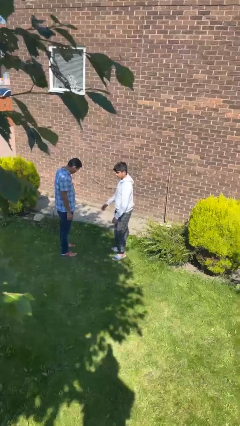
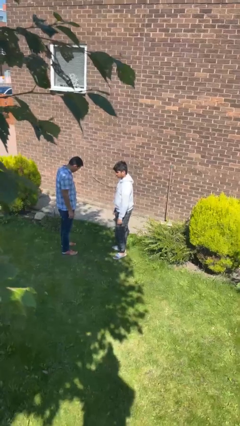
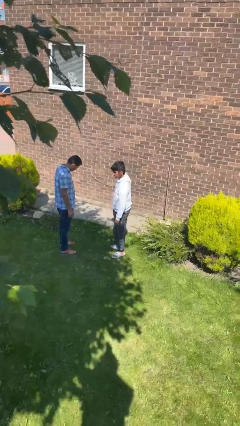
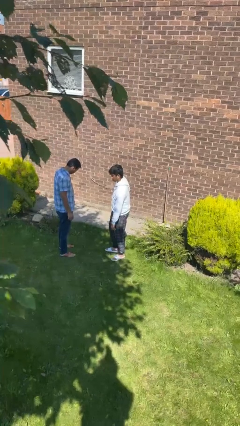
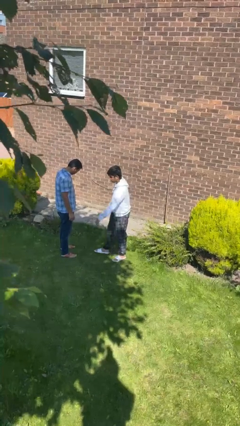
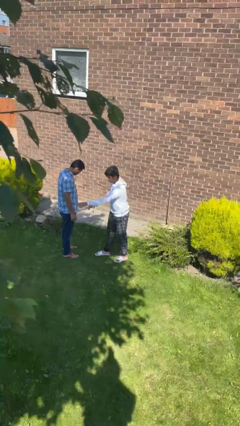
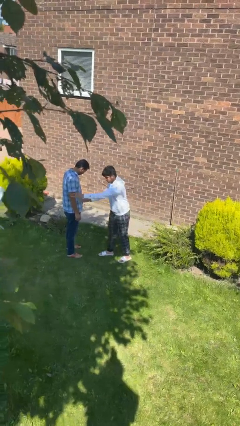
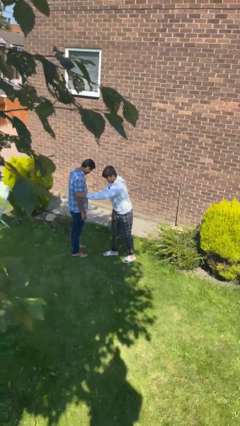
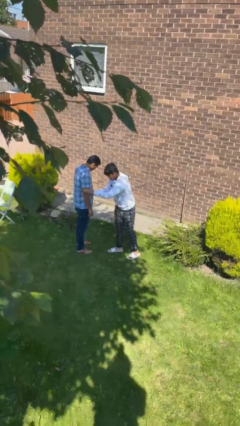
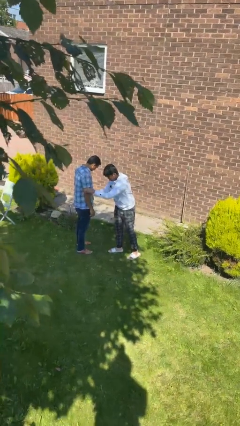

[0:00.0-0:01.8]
person grabs person by bicep

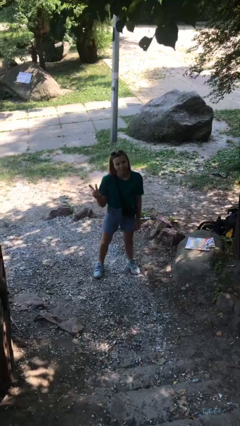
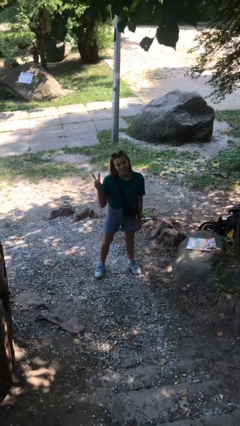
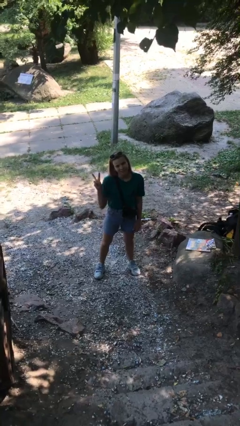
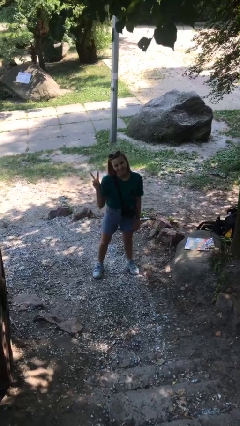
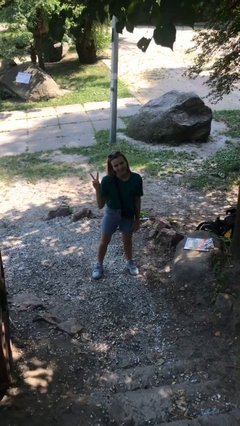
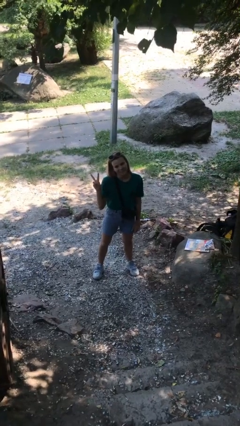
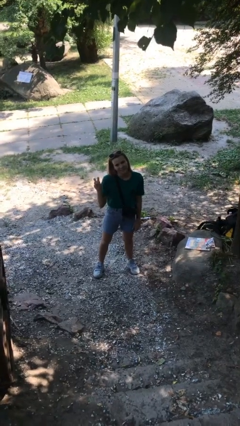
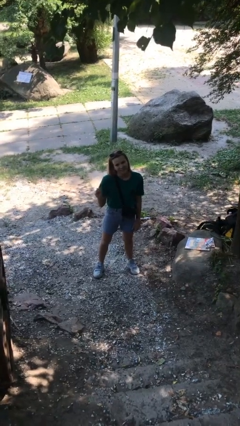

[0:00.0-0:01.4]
person gestures peace

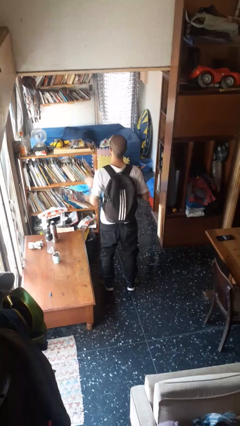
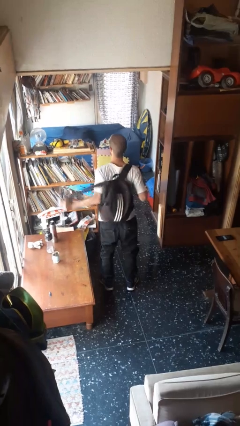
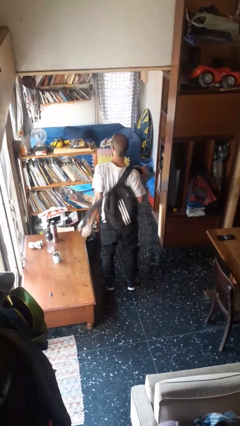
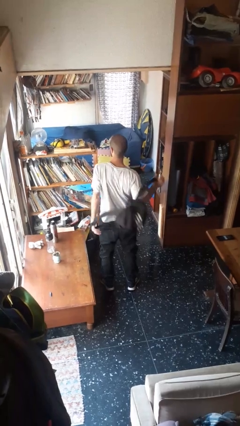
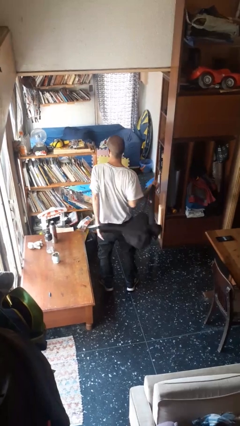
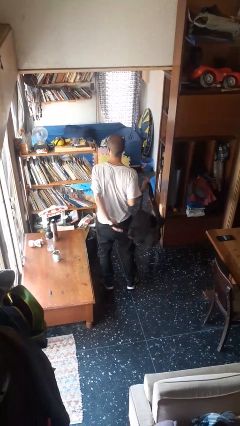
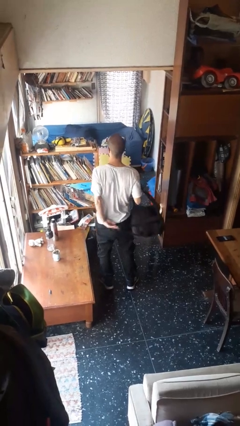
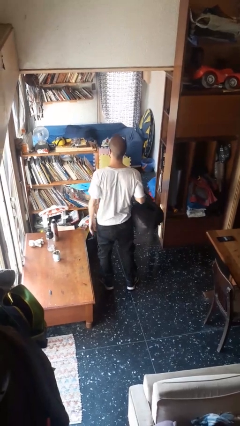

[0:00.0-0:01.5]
person takes off backpack

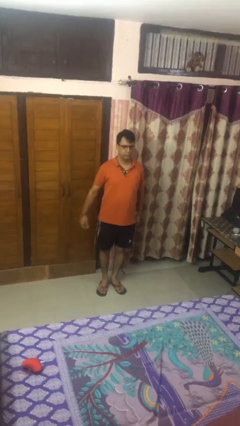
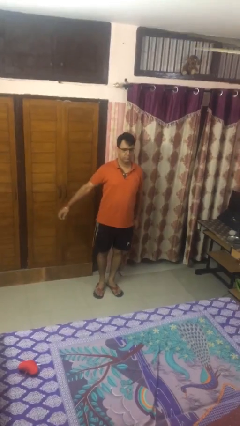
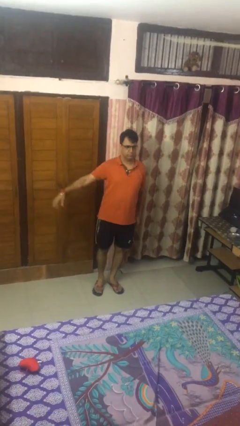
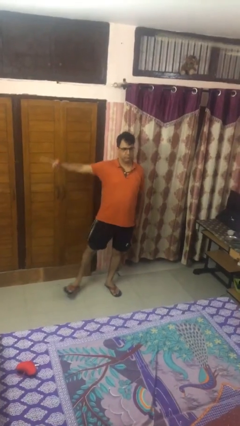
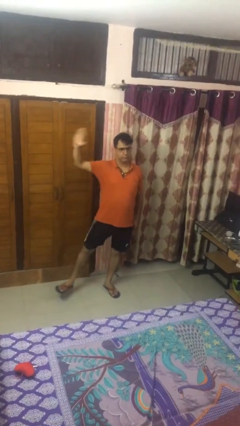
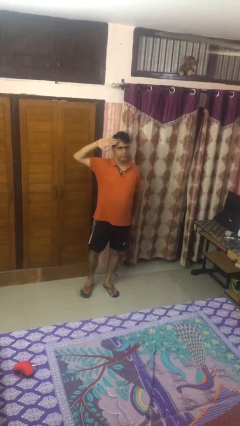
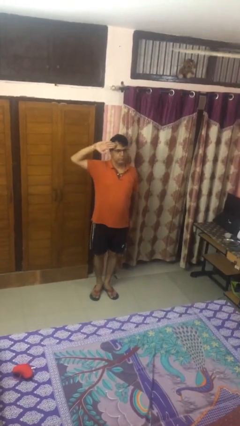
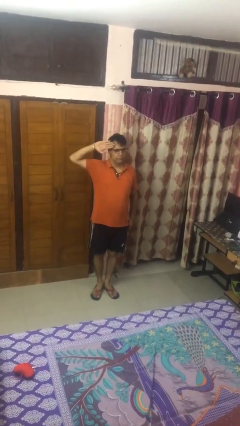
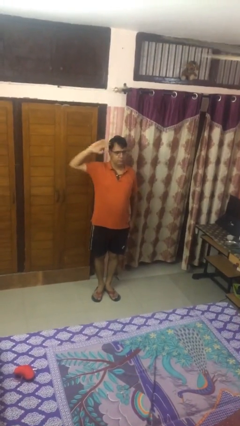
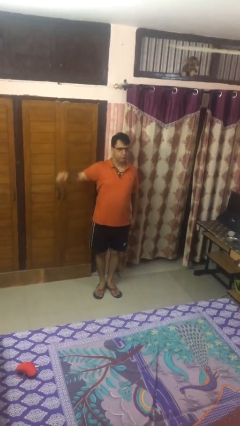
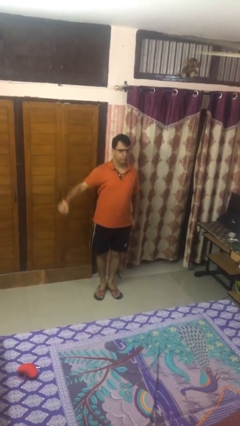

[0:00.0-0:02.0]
person salutes

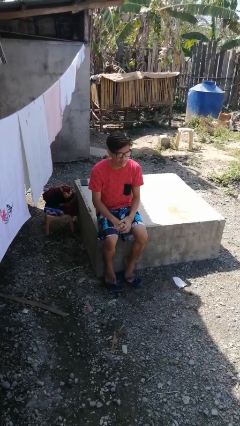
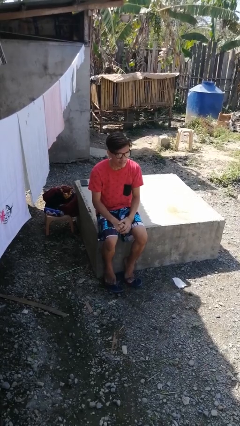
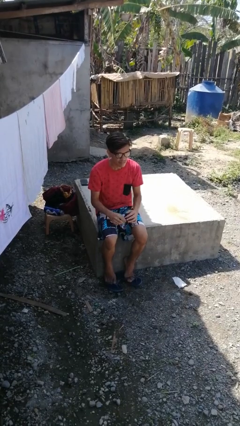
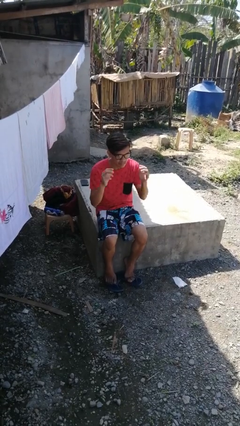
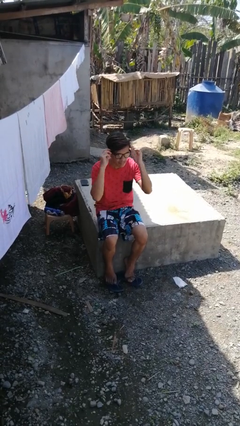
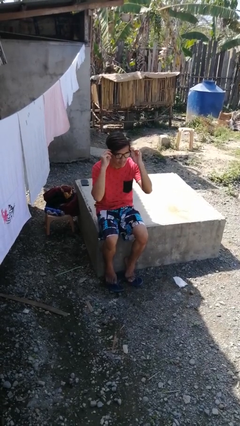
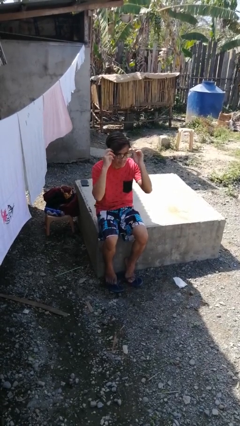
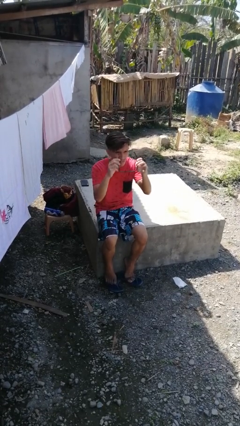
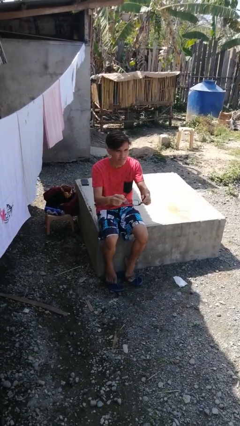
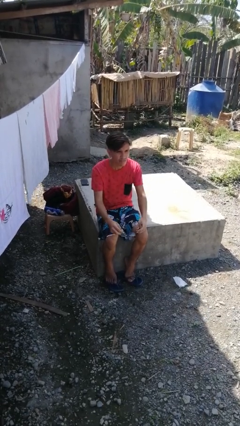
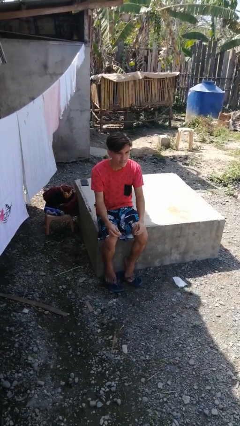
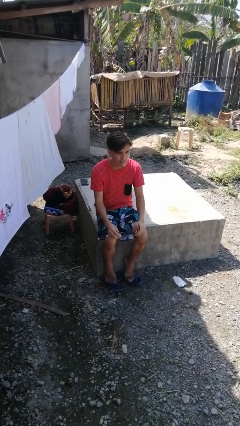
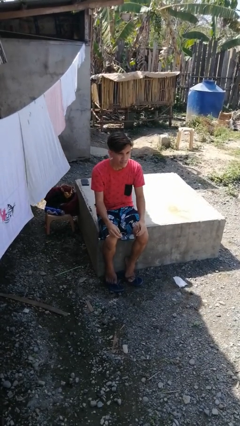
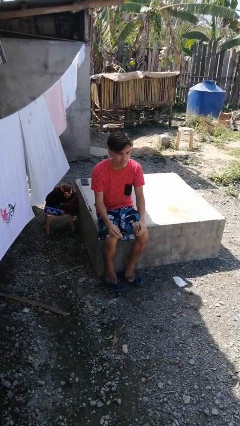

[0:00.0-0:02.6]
person takes off glasses

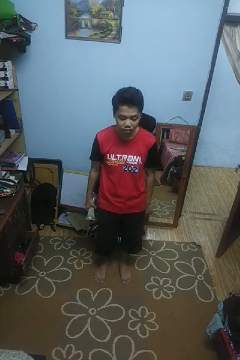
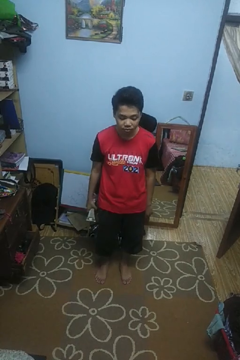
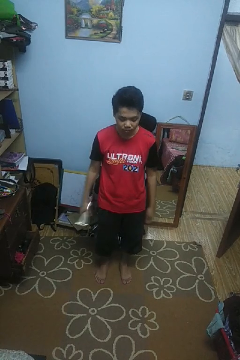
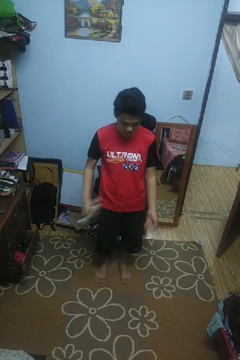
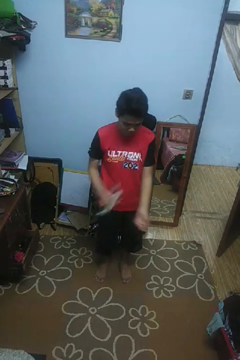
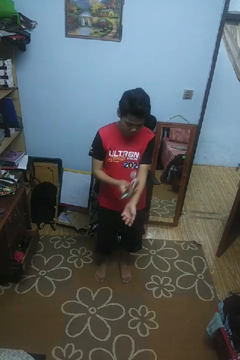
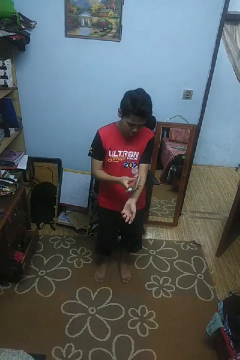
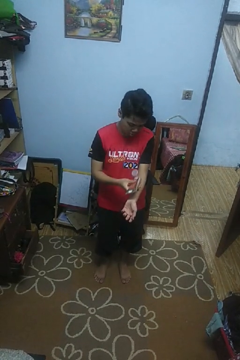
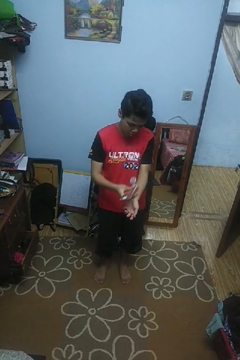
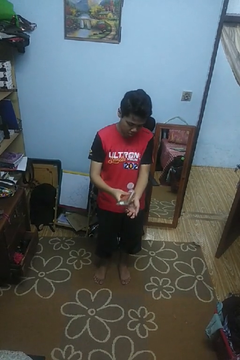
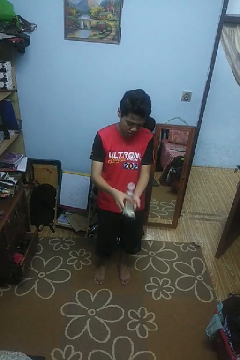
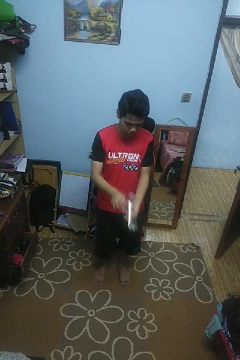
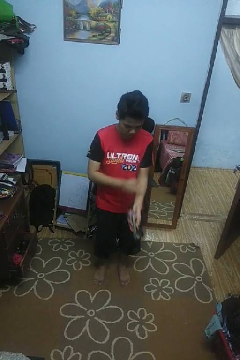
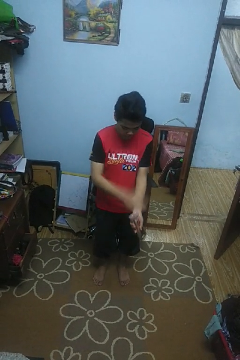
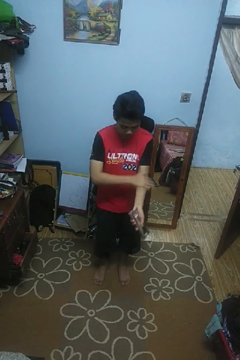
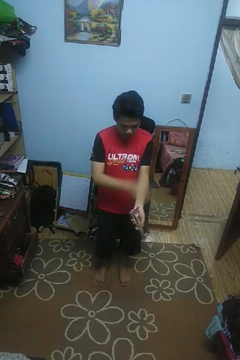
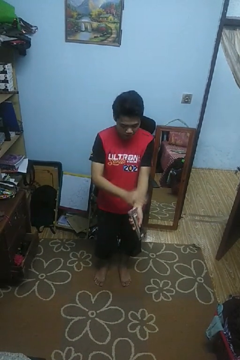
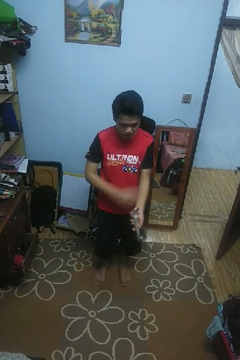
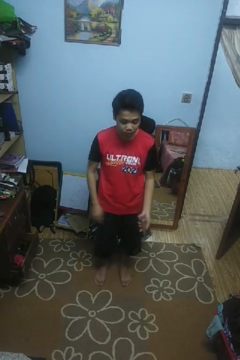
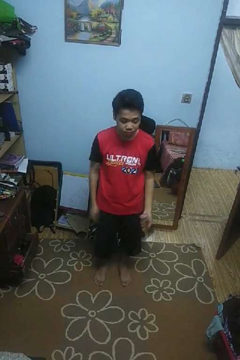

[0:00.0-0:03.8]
person applies sunscreen

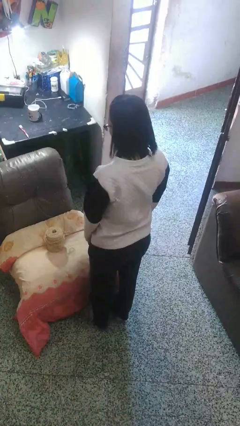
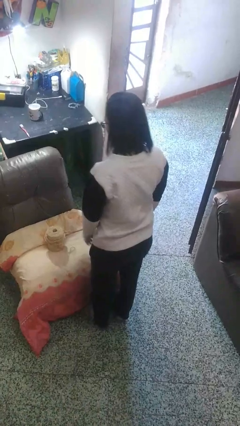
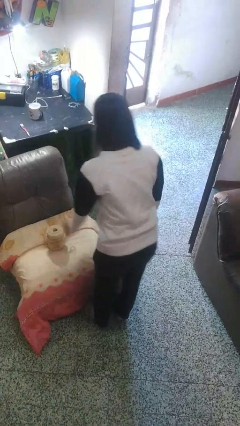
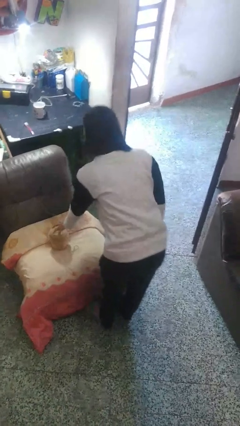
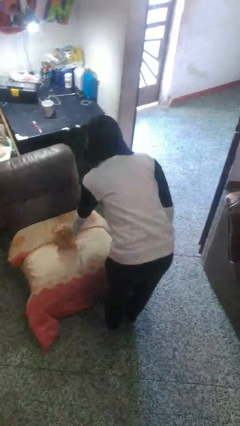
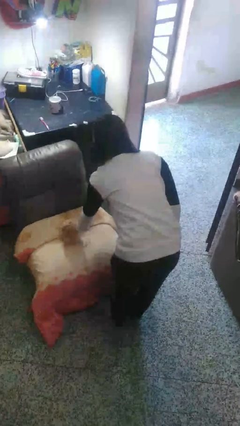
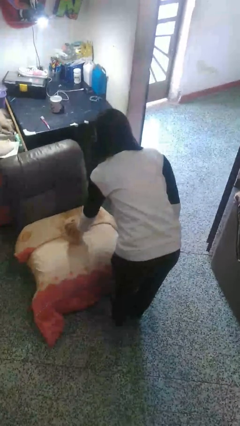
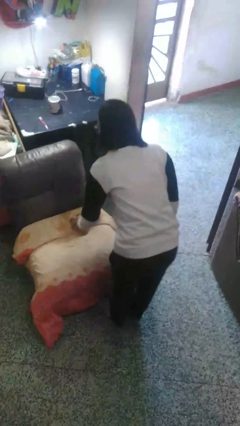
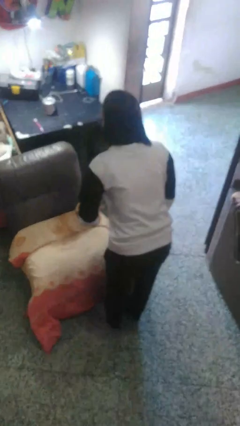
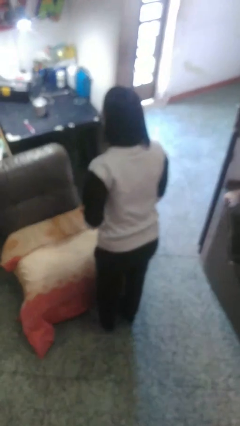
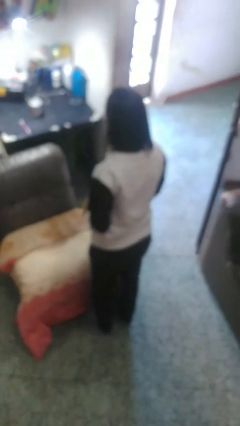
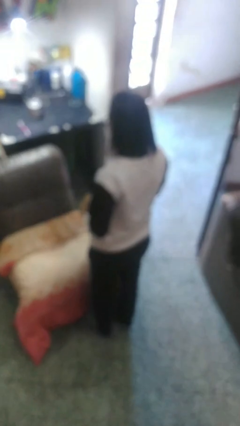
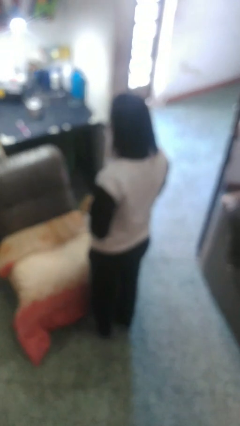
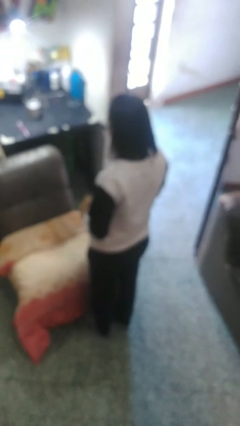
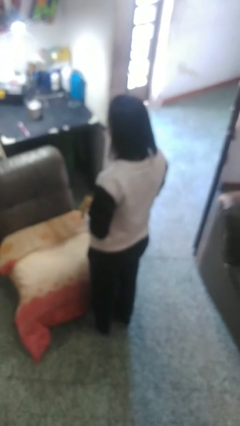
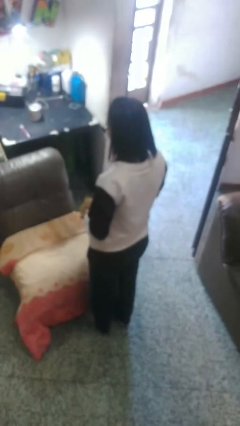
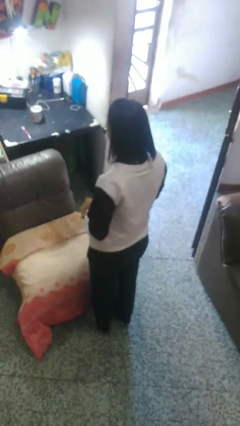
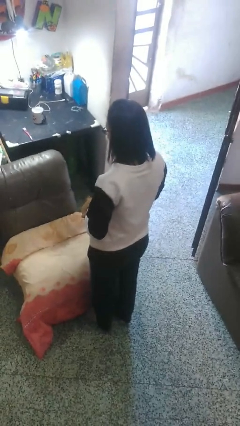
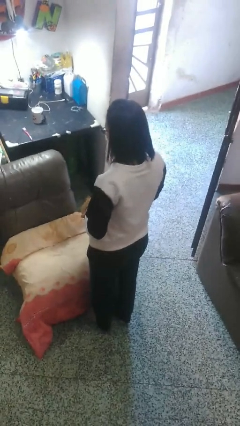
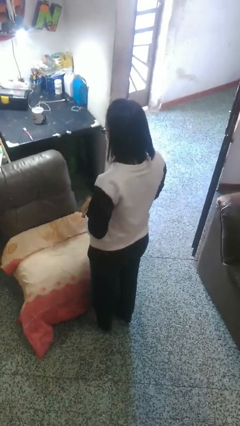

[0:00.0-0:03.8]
person picks up object from couch

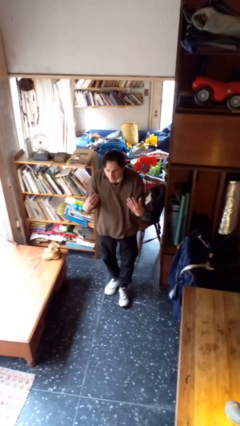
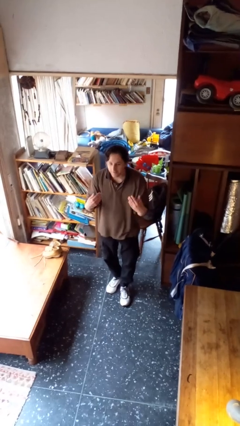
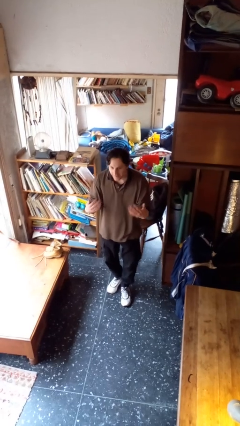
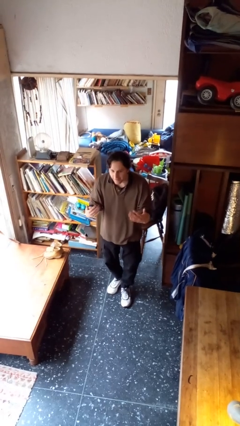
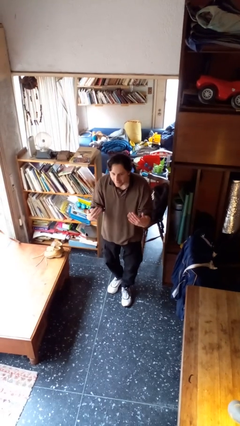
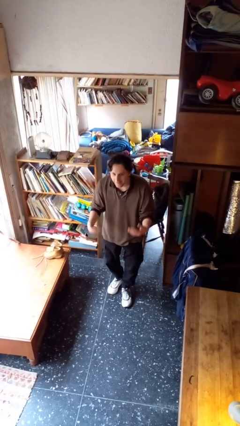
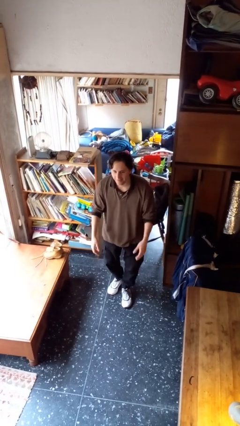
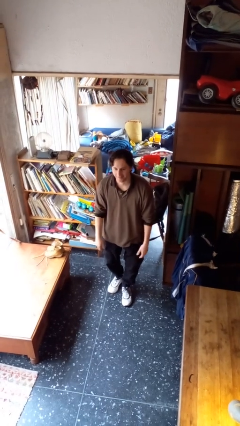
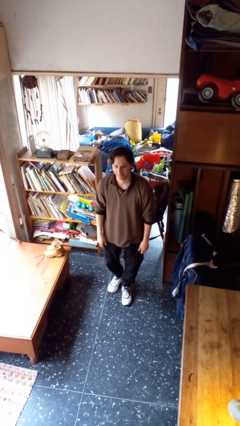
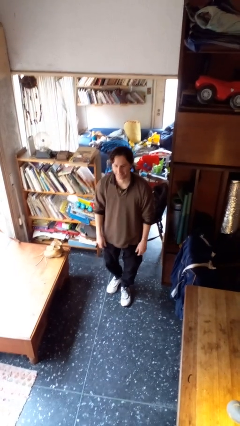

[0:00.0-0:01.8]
person gestures come here
